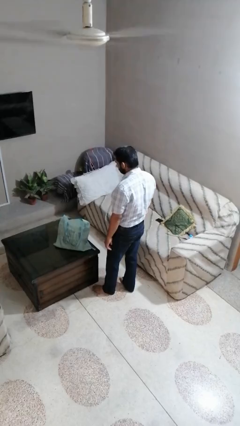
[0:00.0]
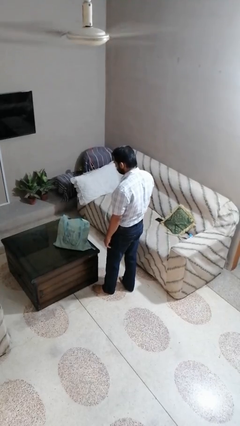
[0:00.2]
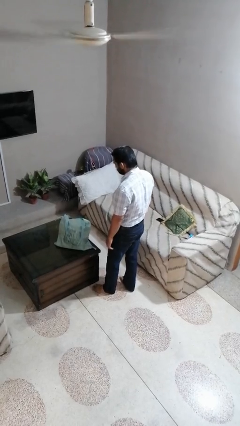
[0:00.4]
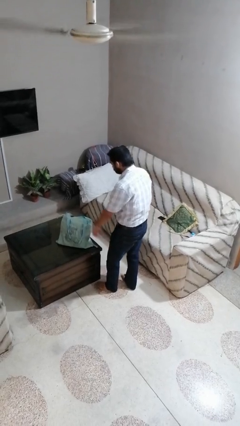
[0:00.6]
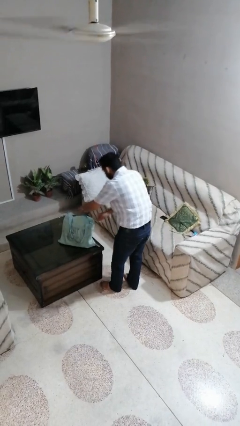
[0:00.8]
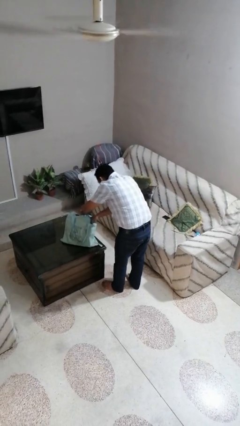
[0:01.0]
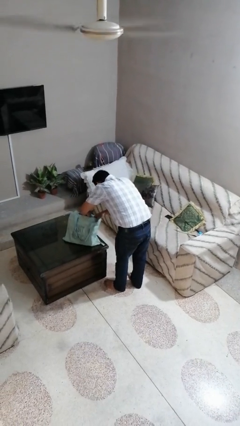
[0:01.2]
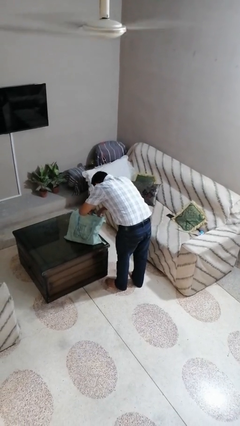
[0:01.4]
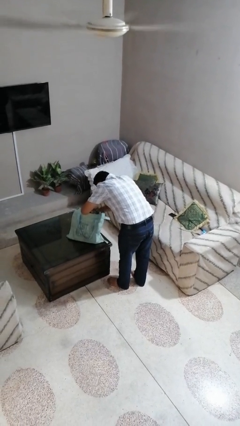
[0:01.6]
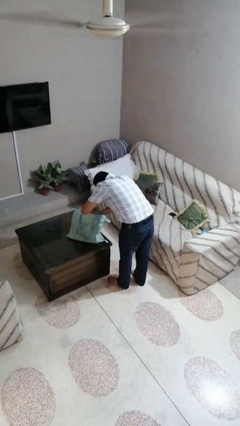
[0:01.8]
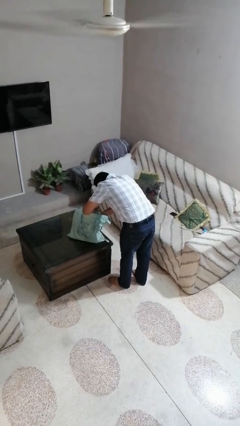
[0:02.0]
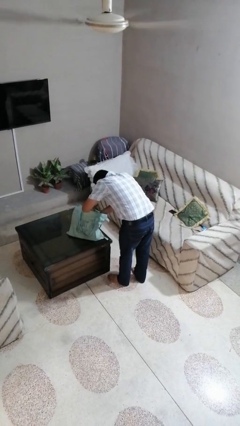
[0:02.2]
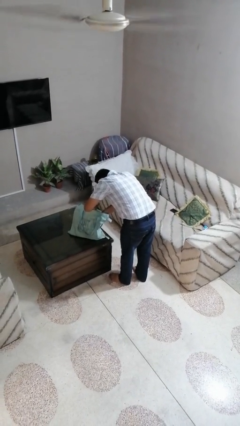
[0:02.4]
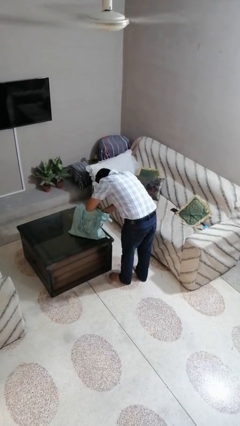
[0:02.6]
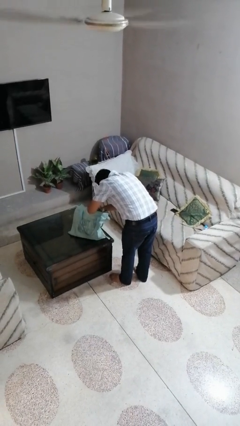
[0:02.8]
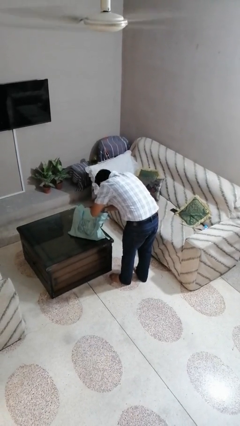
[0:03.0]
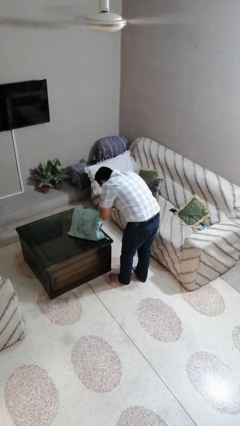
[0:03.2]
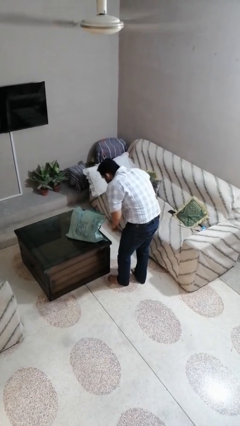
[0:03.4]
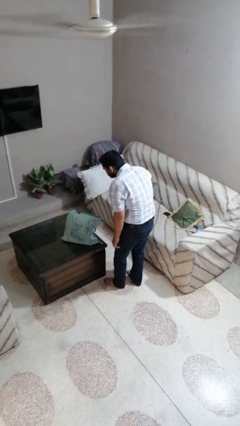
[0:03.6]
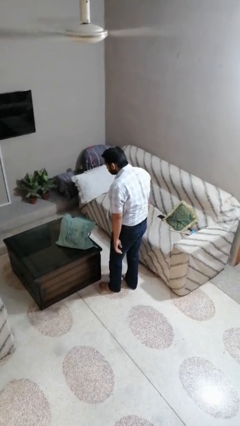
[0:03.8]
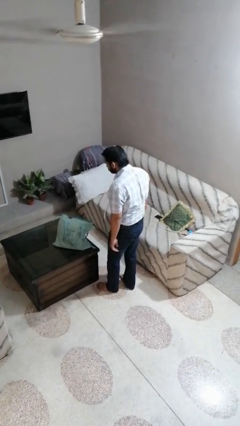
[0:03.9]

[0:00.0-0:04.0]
person searches in bag

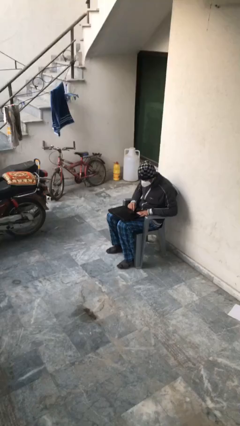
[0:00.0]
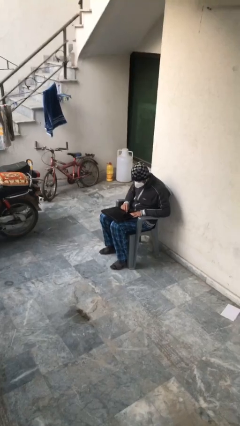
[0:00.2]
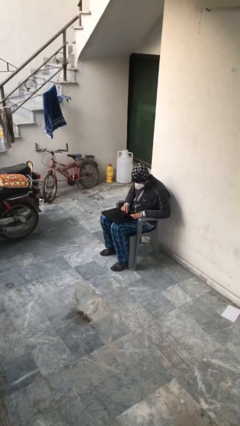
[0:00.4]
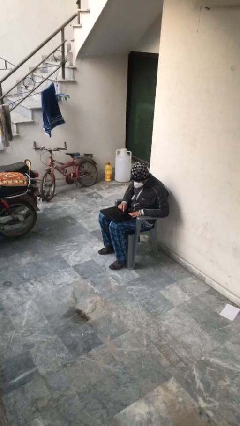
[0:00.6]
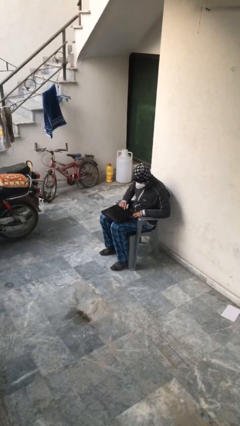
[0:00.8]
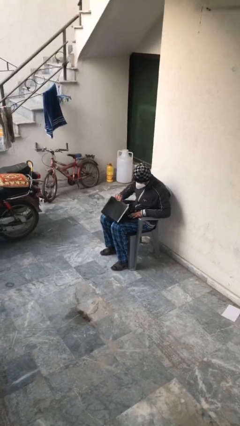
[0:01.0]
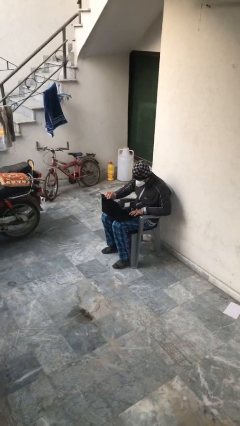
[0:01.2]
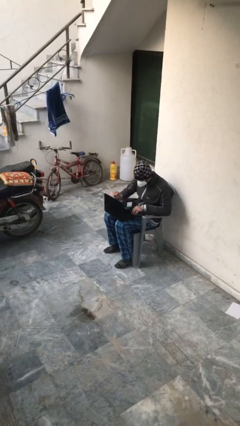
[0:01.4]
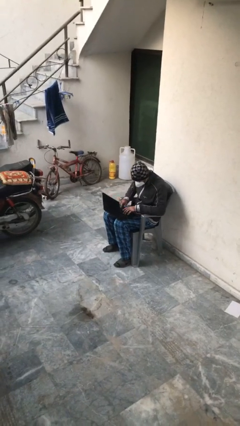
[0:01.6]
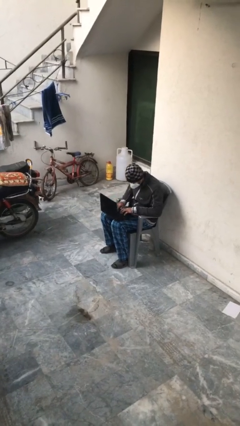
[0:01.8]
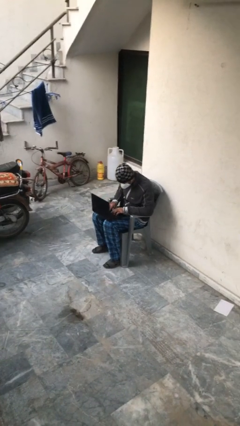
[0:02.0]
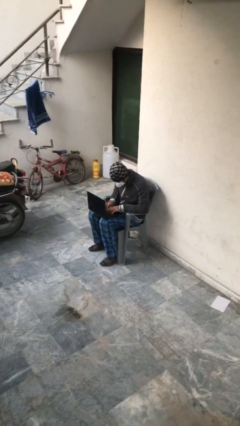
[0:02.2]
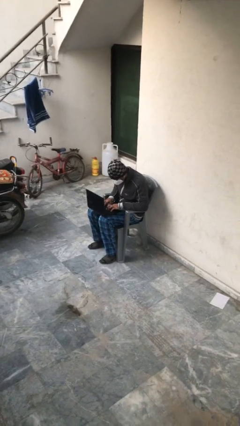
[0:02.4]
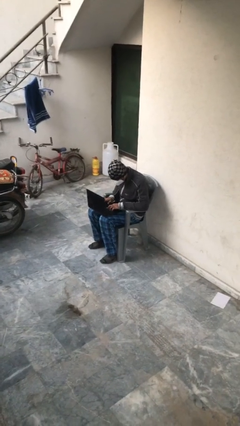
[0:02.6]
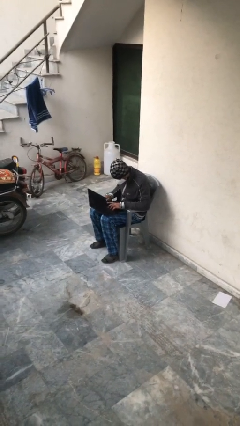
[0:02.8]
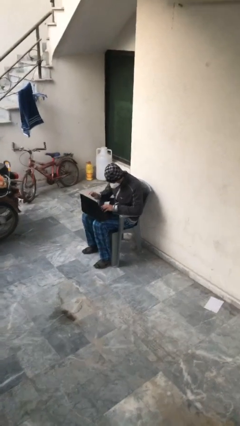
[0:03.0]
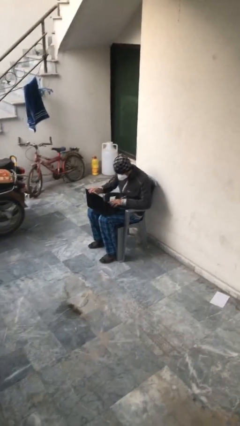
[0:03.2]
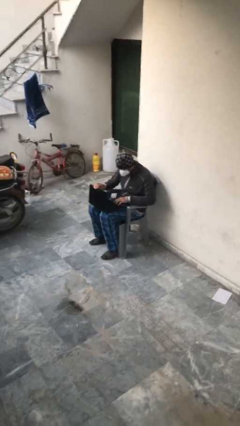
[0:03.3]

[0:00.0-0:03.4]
person interacts with laptop

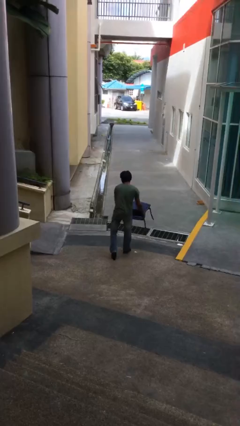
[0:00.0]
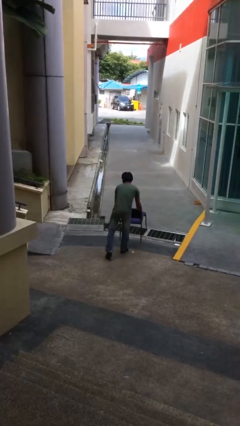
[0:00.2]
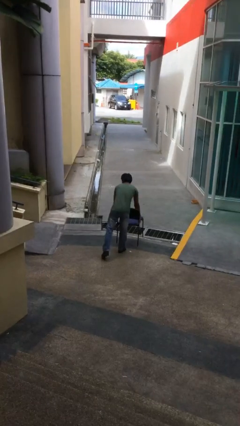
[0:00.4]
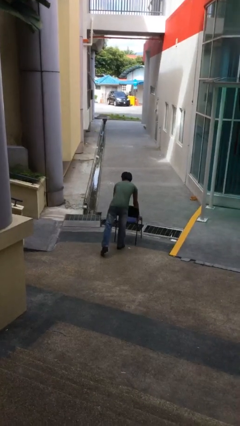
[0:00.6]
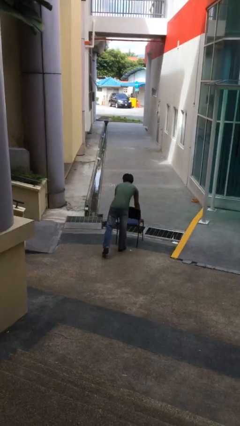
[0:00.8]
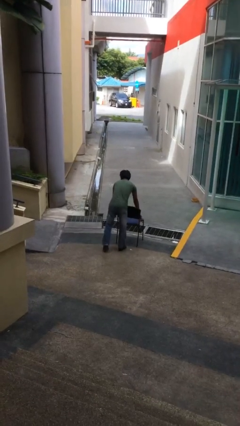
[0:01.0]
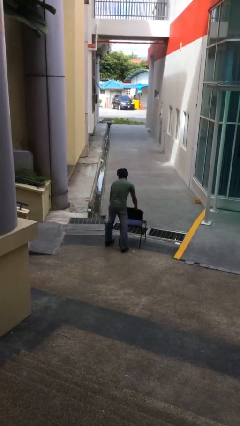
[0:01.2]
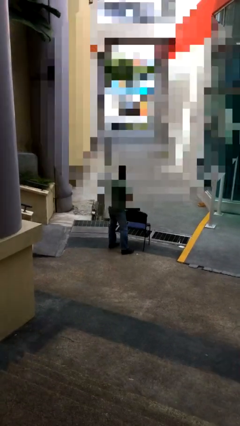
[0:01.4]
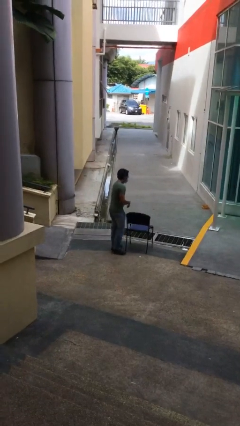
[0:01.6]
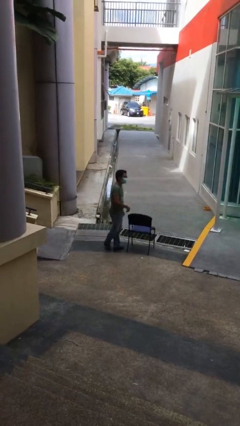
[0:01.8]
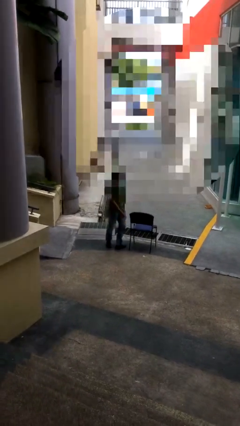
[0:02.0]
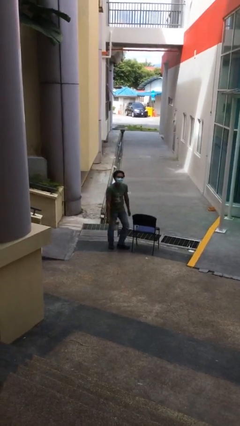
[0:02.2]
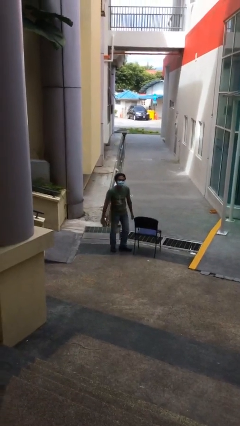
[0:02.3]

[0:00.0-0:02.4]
person puts down object on floor

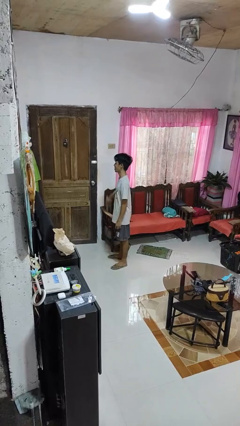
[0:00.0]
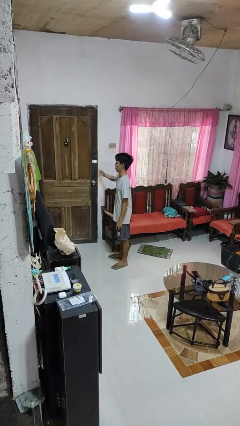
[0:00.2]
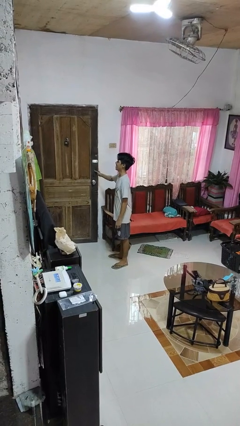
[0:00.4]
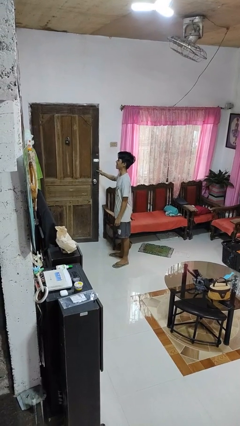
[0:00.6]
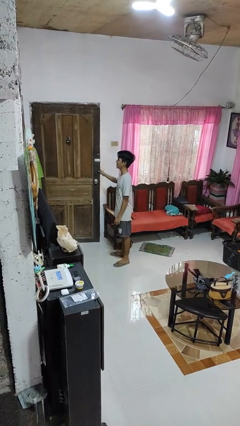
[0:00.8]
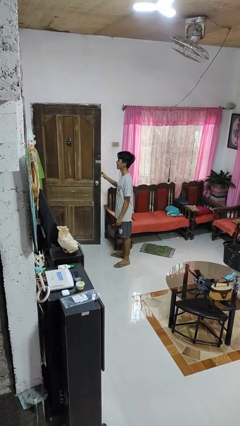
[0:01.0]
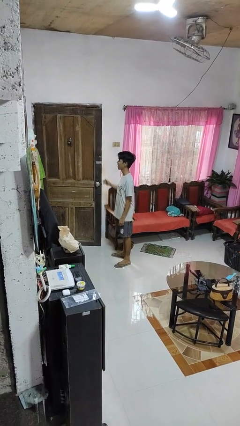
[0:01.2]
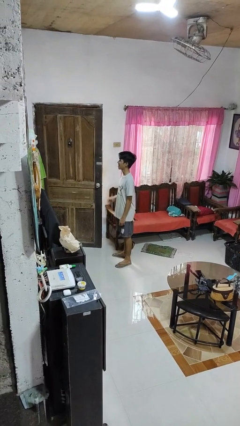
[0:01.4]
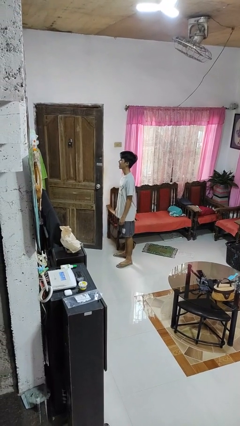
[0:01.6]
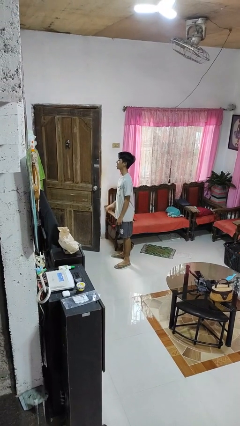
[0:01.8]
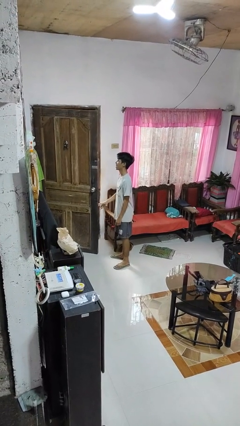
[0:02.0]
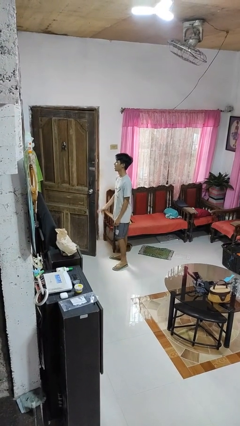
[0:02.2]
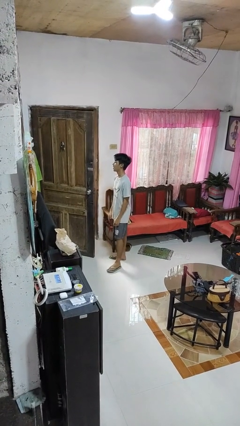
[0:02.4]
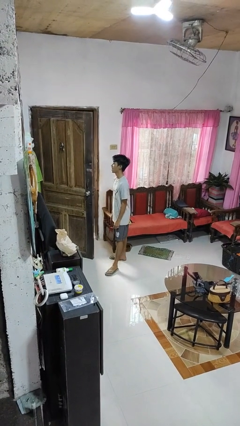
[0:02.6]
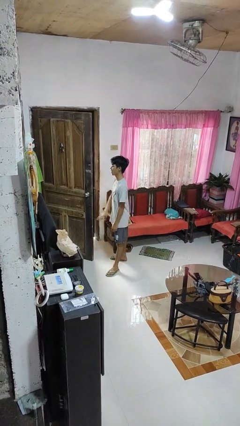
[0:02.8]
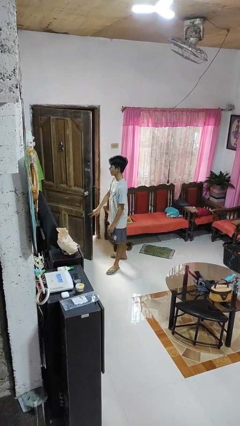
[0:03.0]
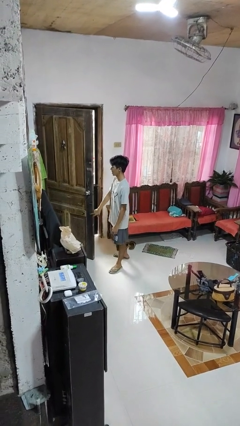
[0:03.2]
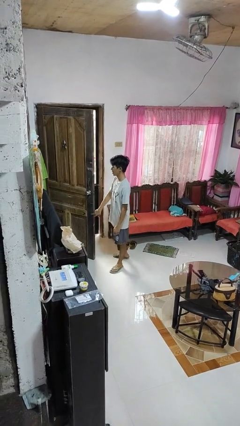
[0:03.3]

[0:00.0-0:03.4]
person opens facility door

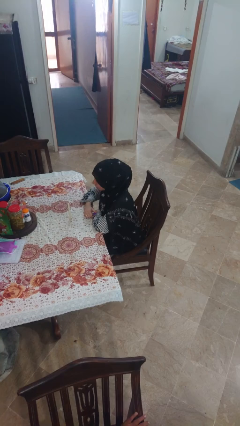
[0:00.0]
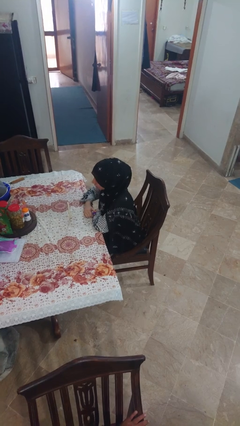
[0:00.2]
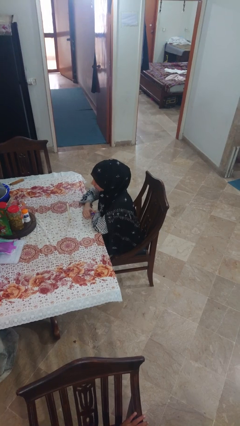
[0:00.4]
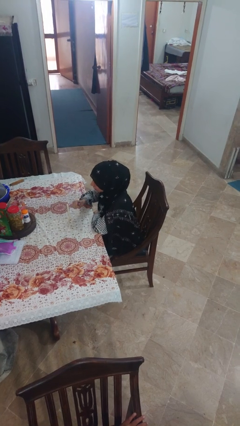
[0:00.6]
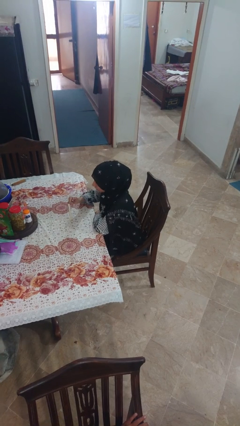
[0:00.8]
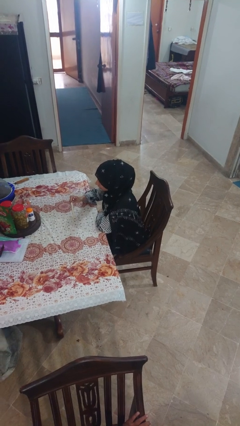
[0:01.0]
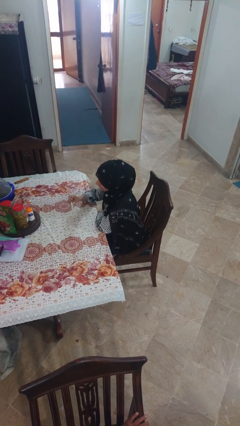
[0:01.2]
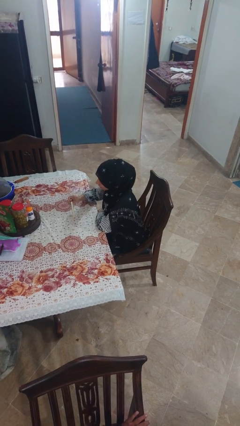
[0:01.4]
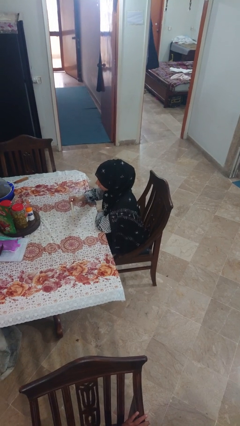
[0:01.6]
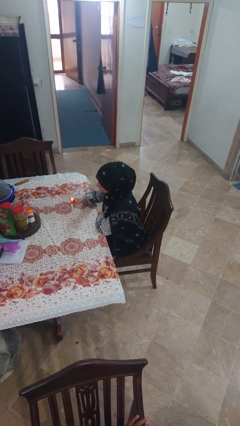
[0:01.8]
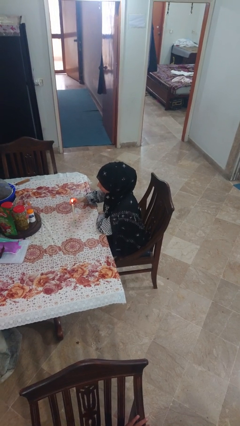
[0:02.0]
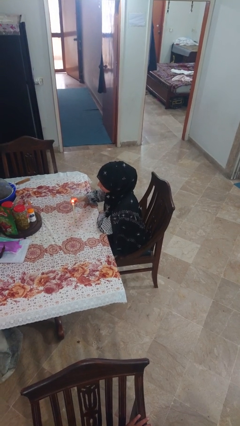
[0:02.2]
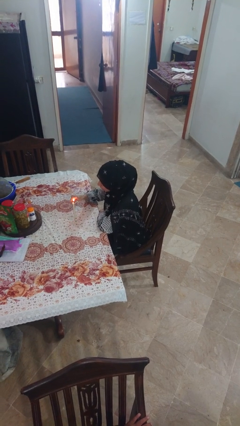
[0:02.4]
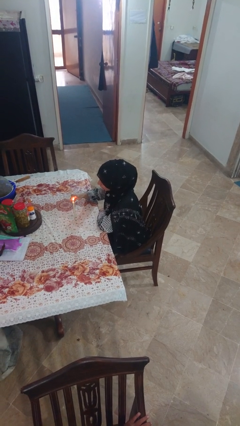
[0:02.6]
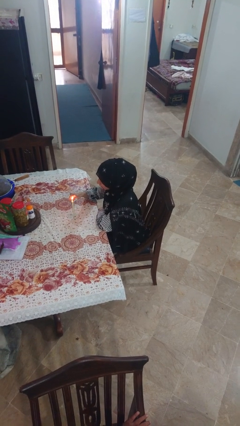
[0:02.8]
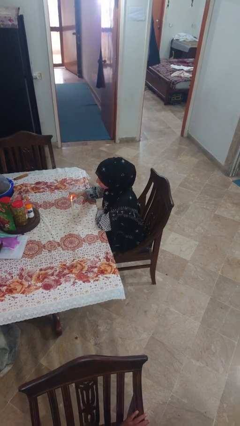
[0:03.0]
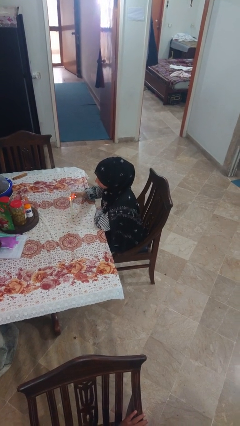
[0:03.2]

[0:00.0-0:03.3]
person lights candle

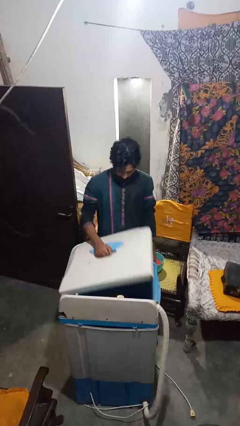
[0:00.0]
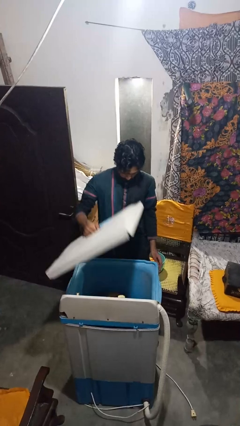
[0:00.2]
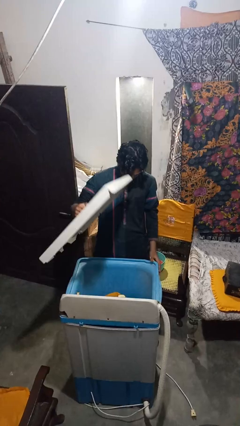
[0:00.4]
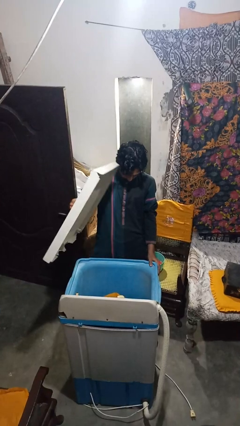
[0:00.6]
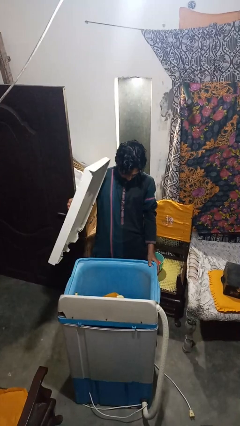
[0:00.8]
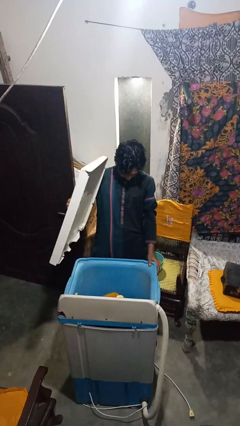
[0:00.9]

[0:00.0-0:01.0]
person opens clothes washer

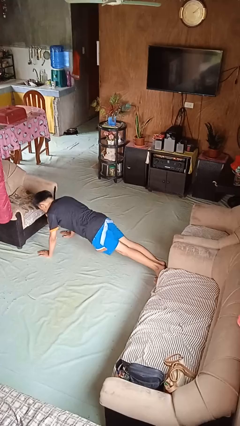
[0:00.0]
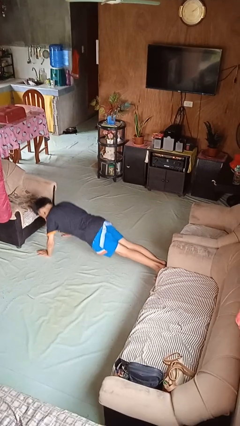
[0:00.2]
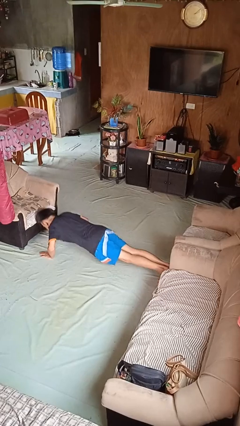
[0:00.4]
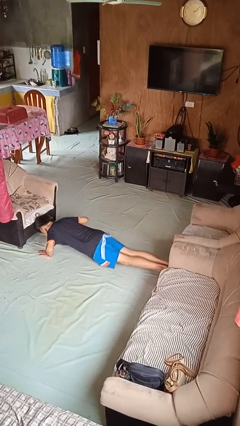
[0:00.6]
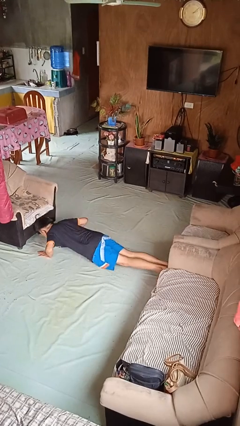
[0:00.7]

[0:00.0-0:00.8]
person exercises with pushup
